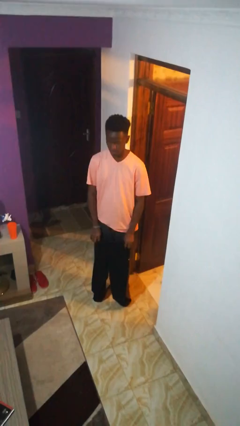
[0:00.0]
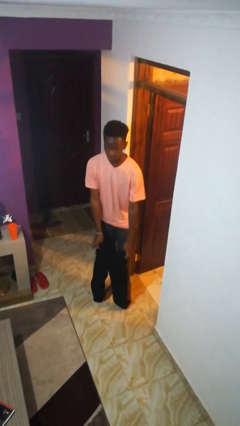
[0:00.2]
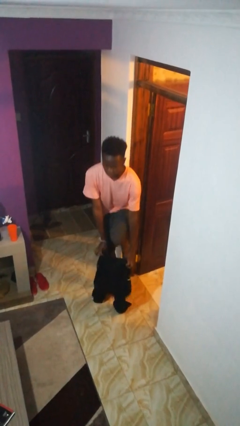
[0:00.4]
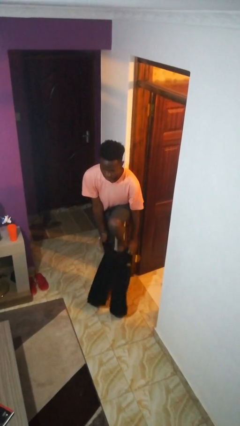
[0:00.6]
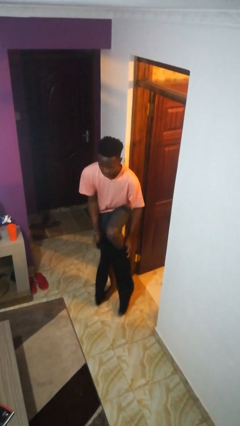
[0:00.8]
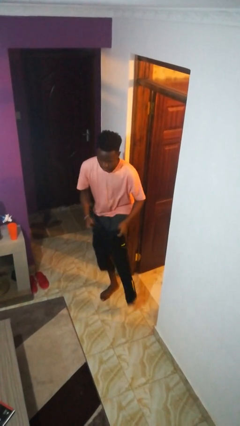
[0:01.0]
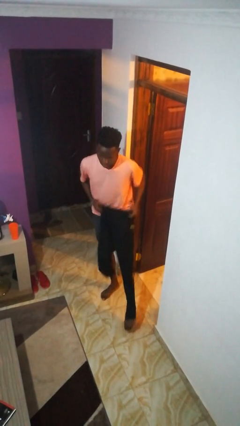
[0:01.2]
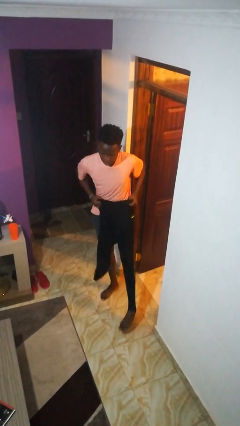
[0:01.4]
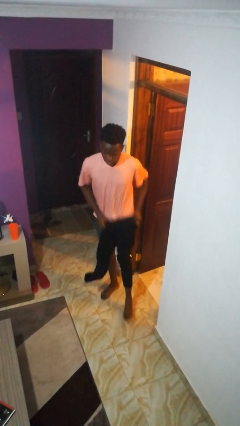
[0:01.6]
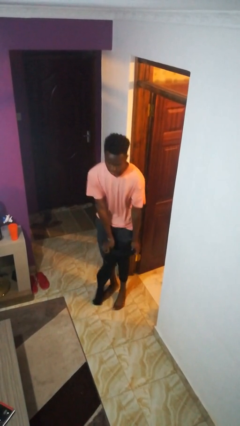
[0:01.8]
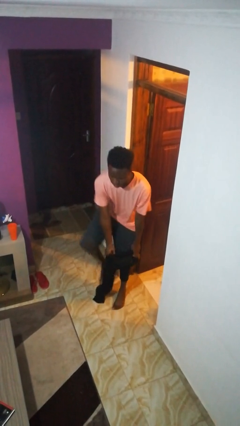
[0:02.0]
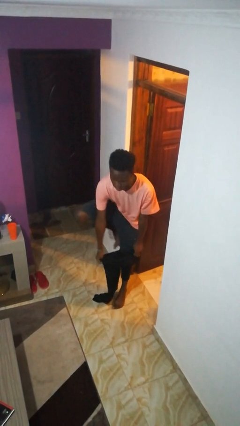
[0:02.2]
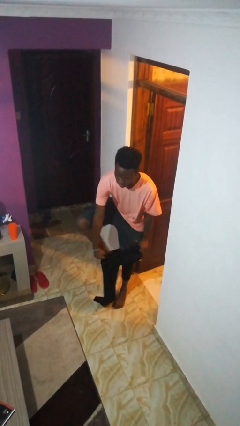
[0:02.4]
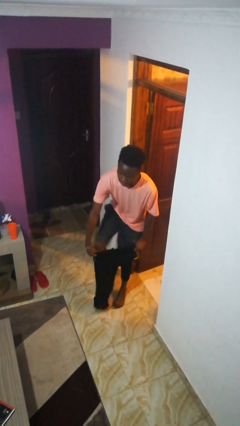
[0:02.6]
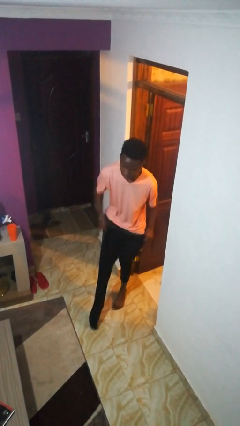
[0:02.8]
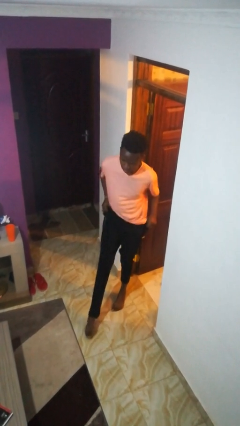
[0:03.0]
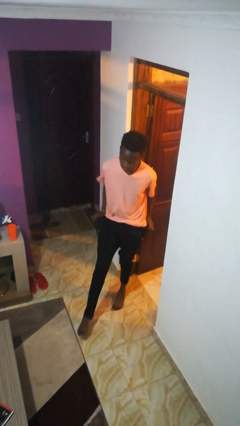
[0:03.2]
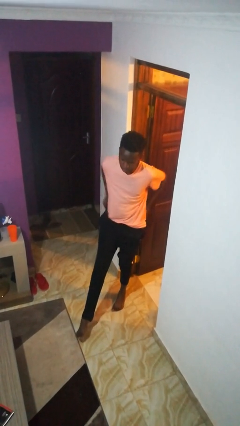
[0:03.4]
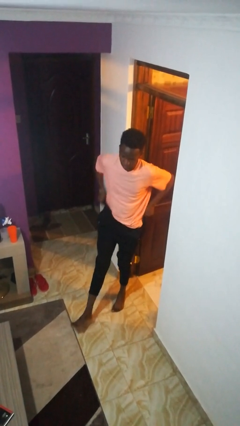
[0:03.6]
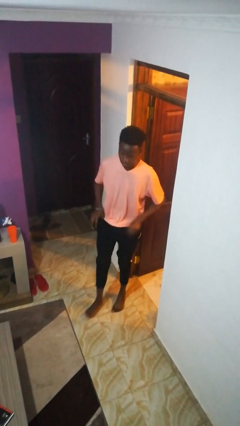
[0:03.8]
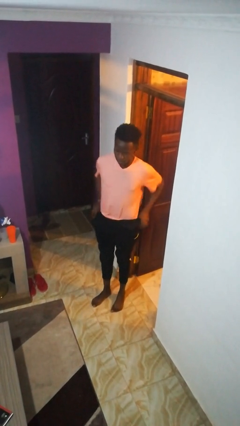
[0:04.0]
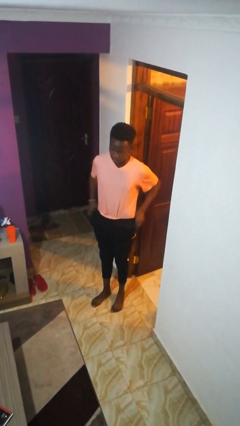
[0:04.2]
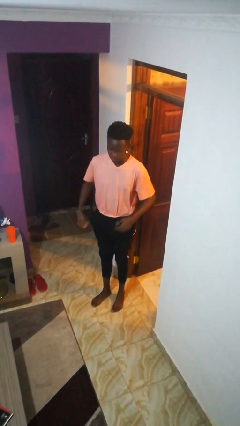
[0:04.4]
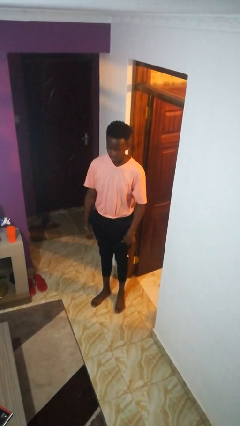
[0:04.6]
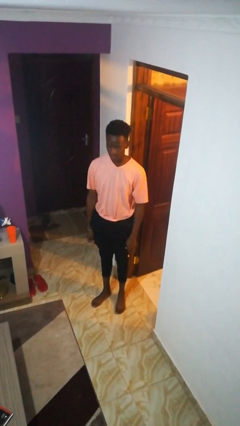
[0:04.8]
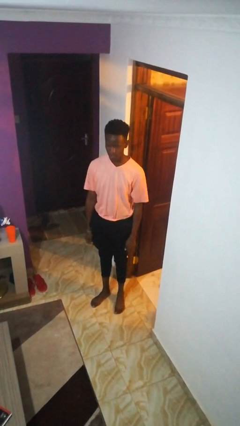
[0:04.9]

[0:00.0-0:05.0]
person puts on pants

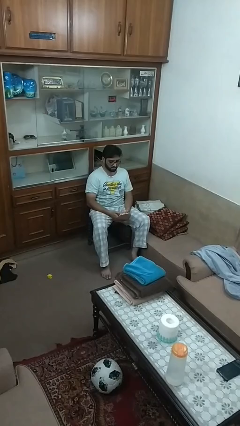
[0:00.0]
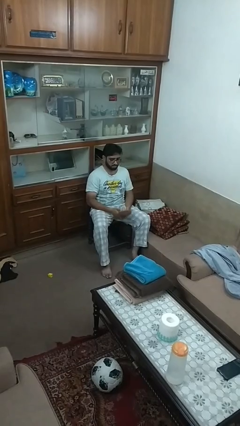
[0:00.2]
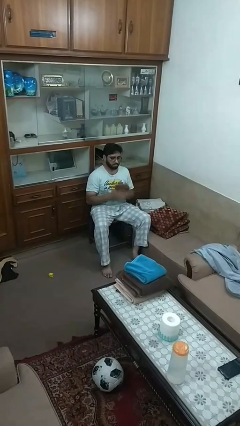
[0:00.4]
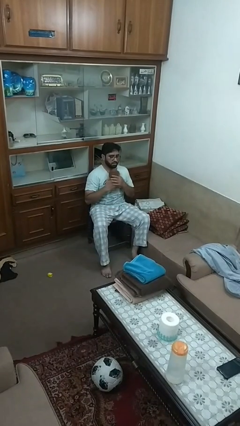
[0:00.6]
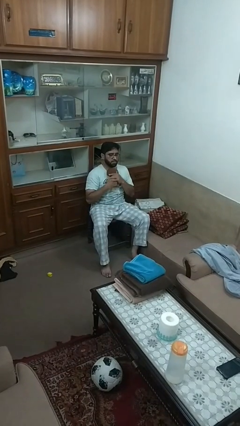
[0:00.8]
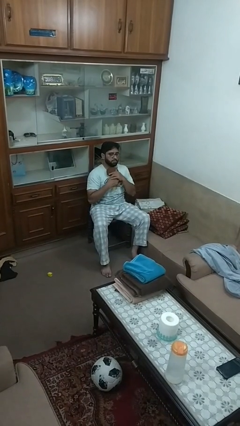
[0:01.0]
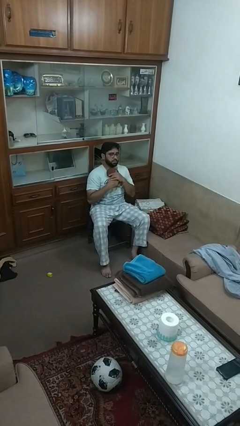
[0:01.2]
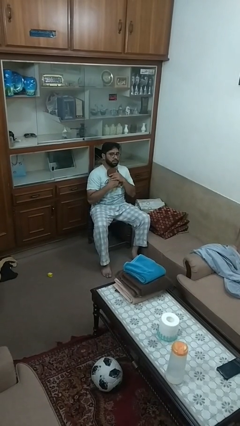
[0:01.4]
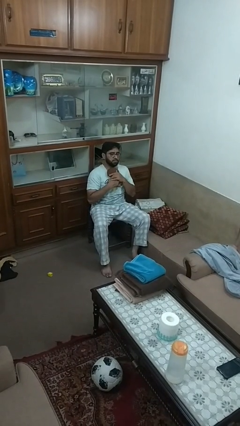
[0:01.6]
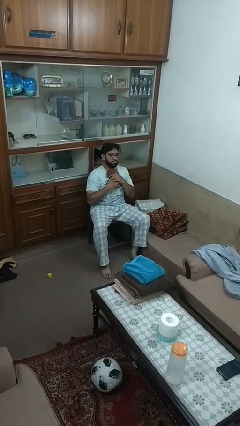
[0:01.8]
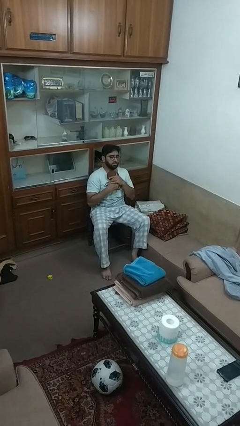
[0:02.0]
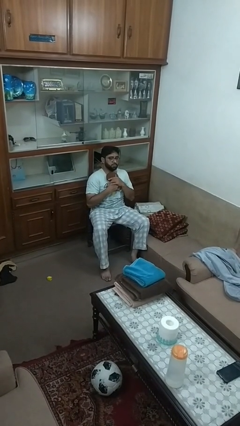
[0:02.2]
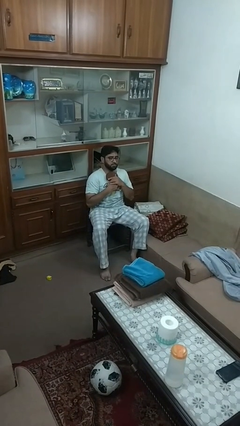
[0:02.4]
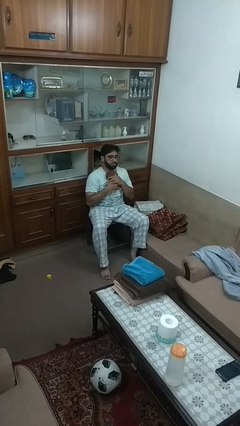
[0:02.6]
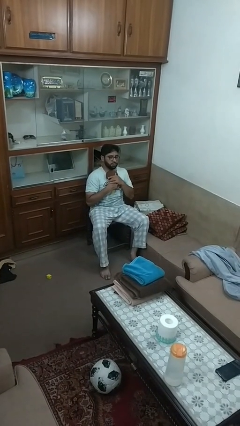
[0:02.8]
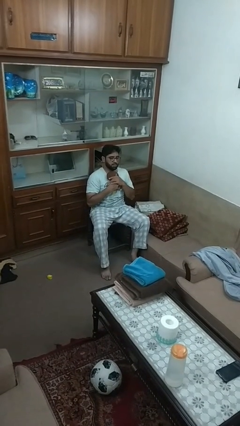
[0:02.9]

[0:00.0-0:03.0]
person hugs stuffed animal

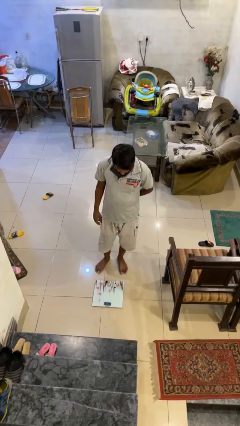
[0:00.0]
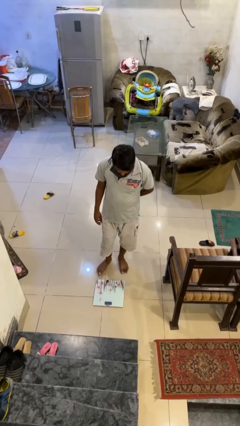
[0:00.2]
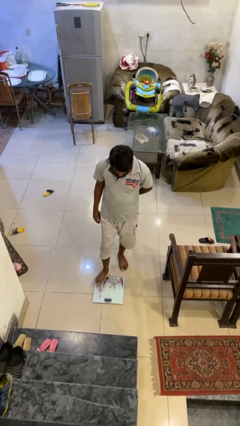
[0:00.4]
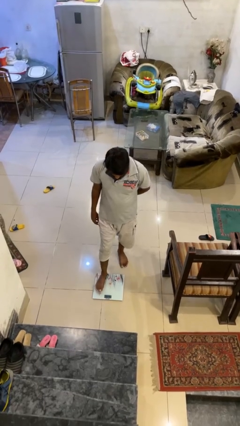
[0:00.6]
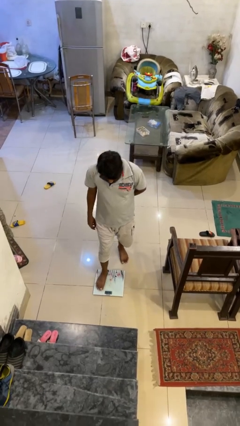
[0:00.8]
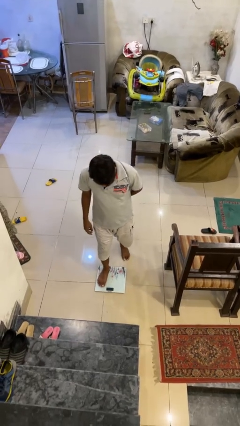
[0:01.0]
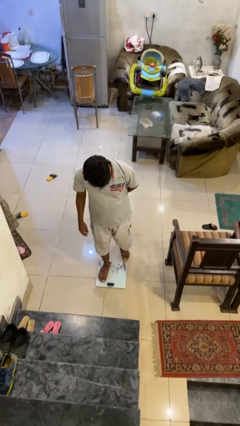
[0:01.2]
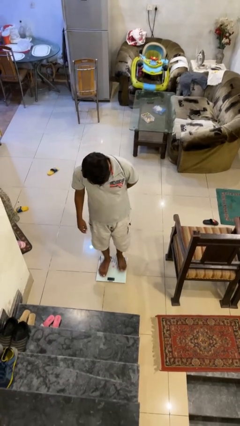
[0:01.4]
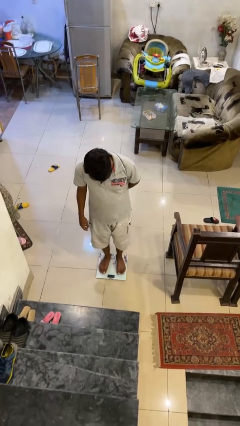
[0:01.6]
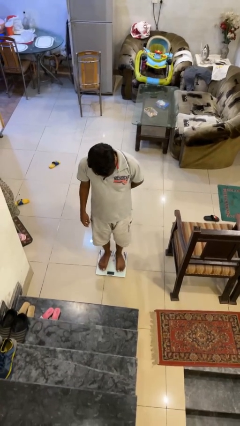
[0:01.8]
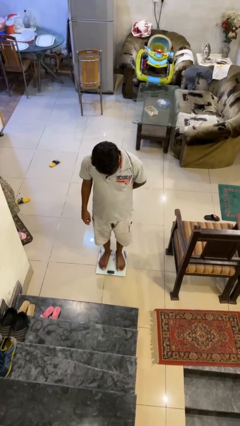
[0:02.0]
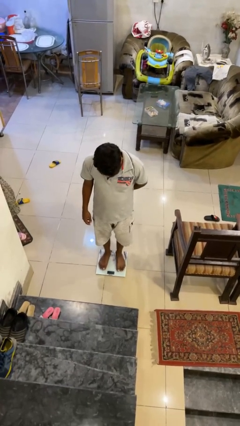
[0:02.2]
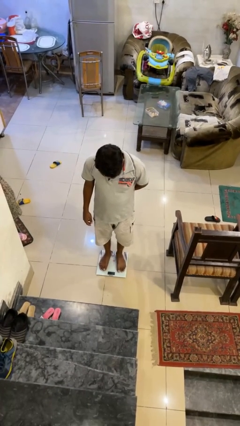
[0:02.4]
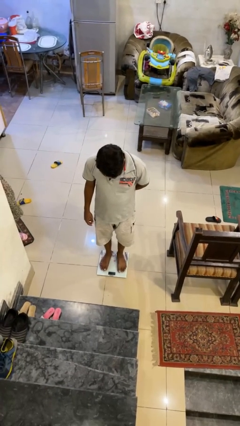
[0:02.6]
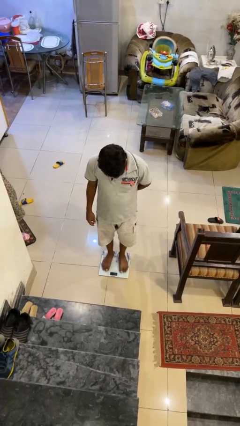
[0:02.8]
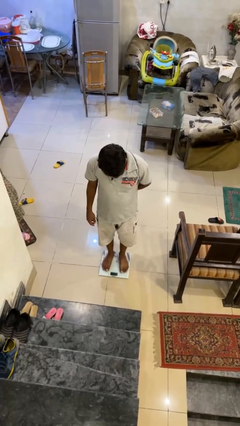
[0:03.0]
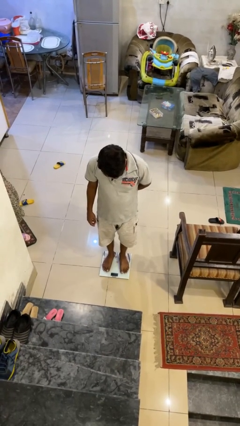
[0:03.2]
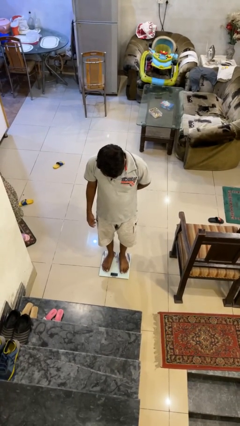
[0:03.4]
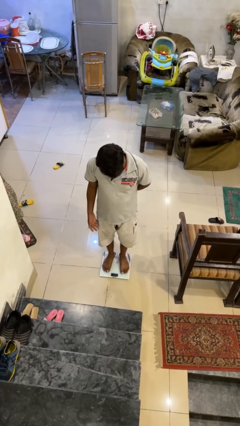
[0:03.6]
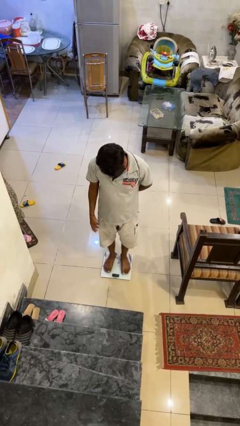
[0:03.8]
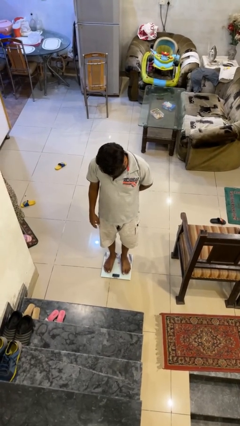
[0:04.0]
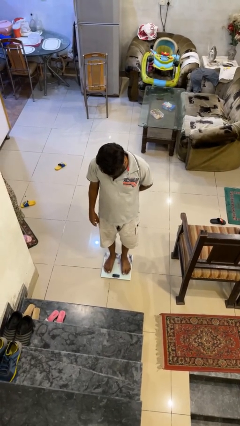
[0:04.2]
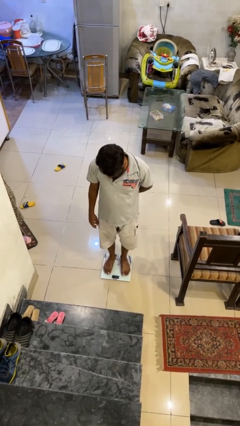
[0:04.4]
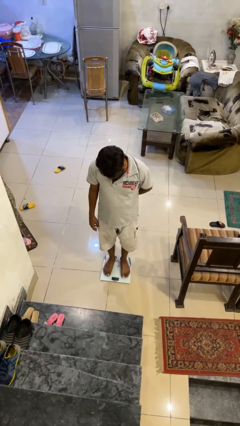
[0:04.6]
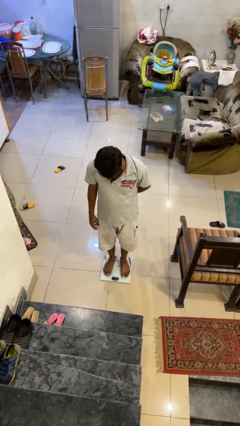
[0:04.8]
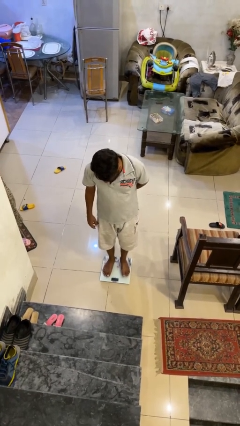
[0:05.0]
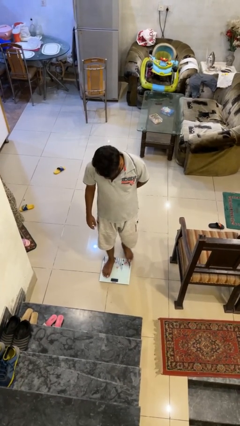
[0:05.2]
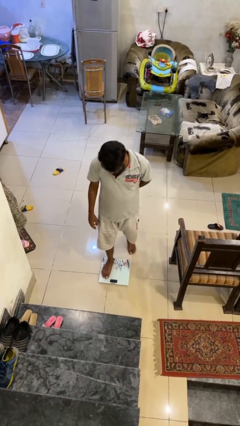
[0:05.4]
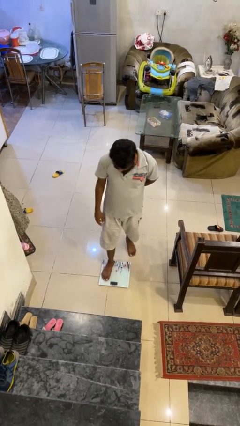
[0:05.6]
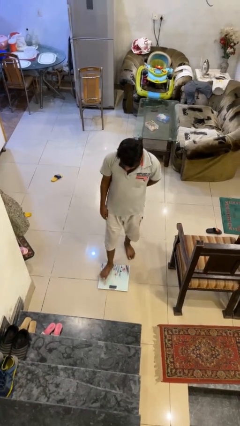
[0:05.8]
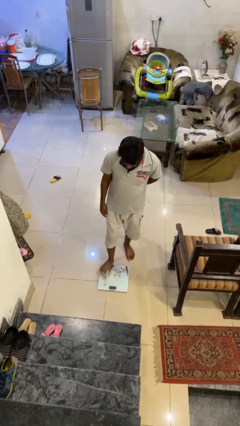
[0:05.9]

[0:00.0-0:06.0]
person uses bodyweight scale

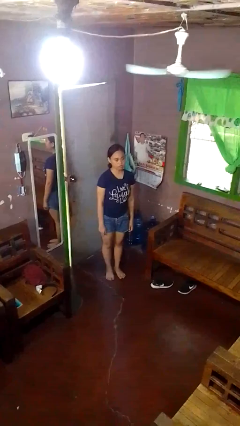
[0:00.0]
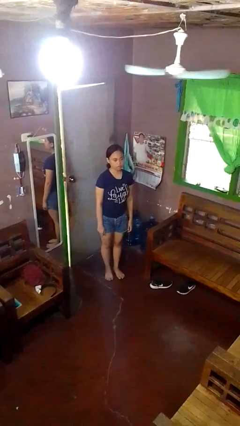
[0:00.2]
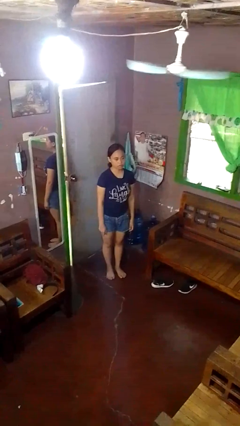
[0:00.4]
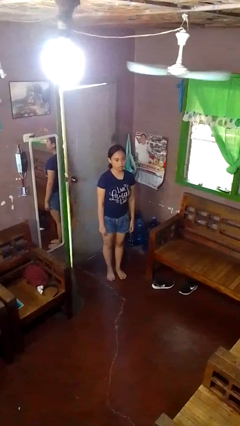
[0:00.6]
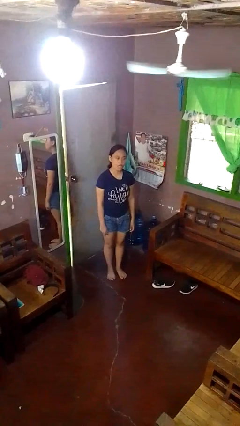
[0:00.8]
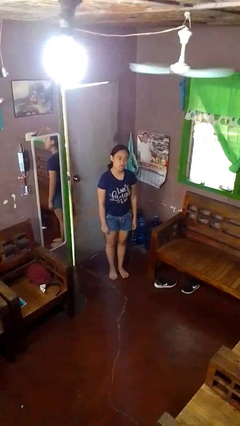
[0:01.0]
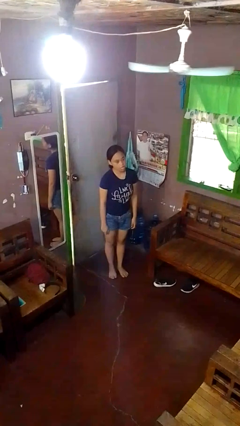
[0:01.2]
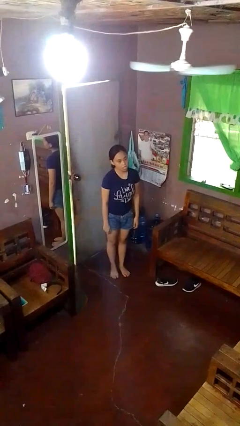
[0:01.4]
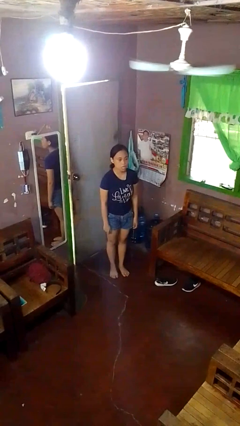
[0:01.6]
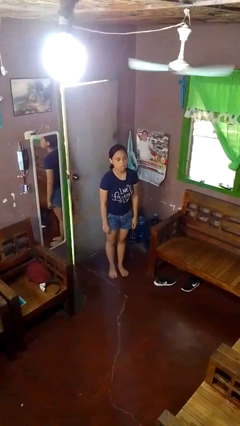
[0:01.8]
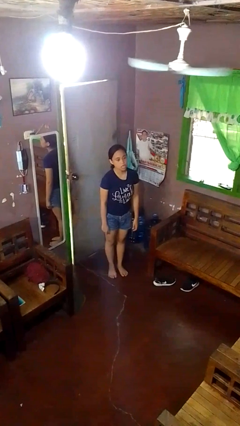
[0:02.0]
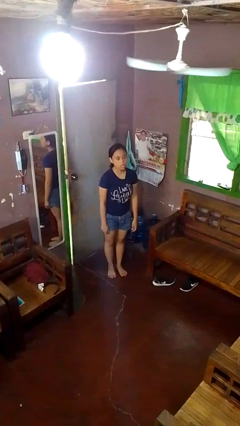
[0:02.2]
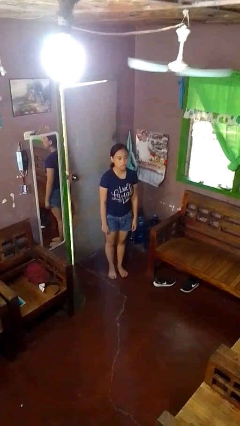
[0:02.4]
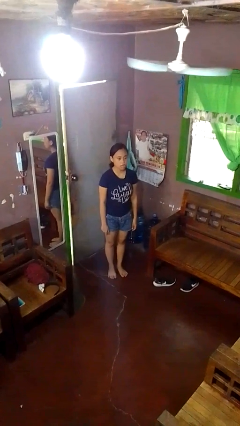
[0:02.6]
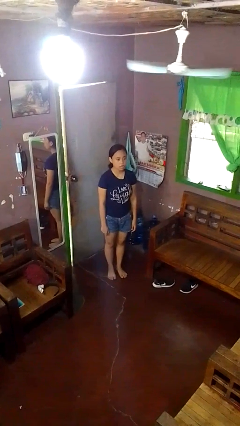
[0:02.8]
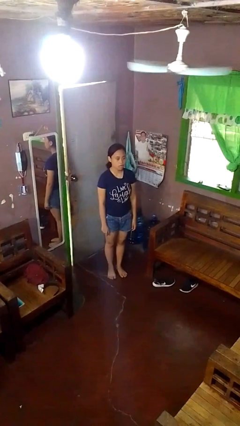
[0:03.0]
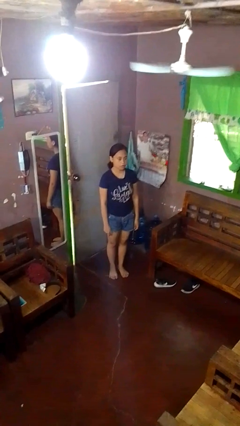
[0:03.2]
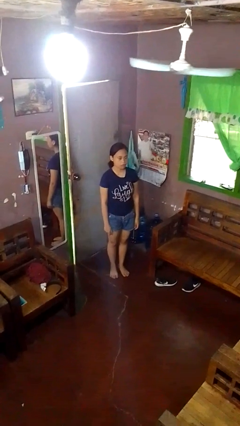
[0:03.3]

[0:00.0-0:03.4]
person sticks out tongue

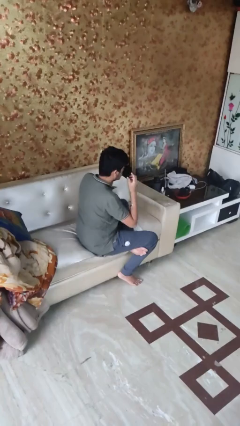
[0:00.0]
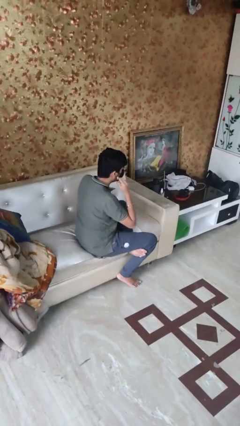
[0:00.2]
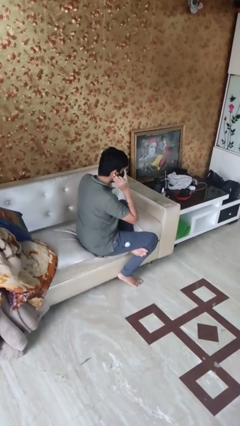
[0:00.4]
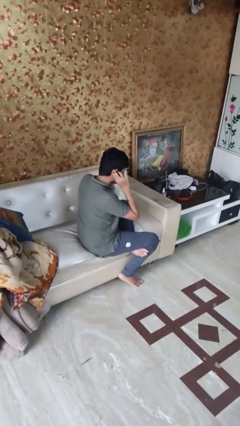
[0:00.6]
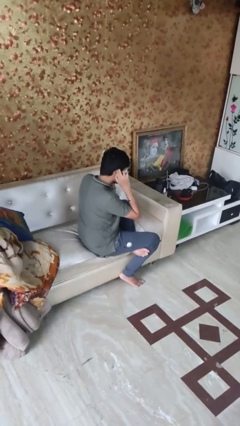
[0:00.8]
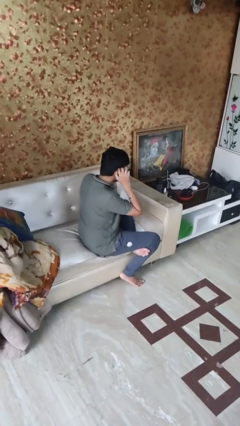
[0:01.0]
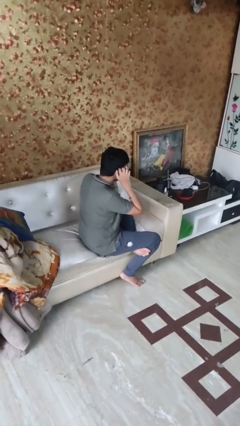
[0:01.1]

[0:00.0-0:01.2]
person puts on facemask
